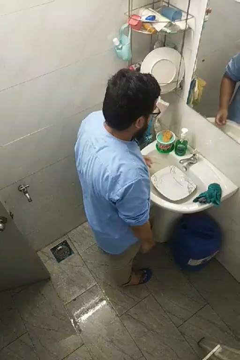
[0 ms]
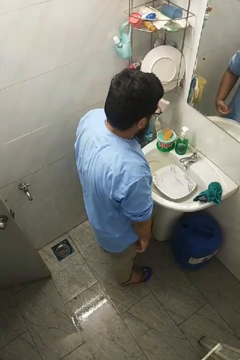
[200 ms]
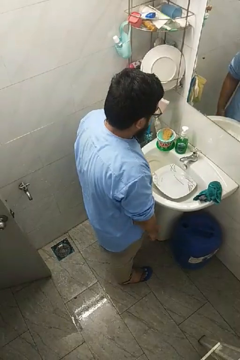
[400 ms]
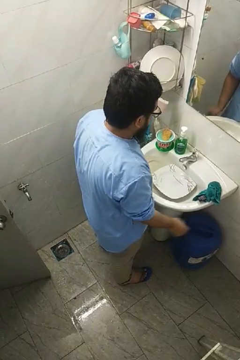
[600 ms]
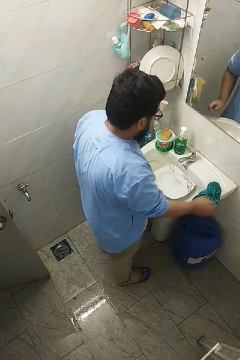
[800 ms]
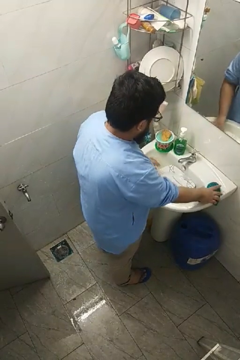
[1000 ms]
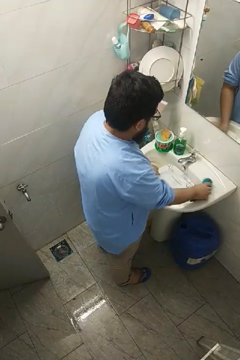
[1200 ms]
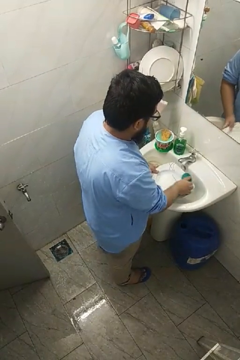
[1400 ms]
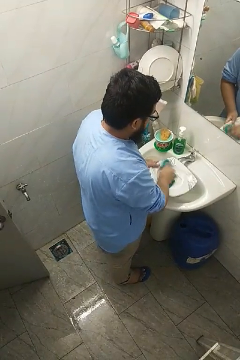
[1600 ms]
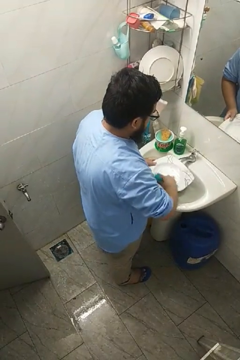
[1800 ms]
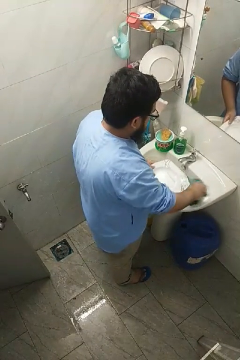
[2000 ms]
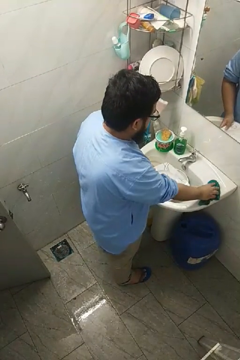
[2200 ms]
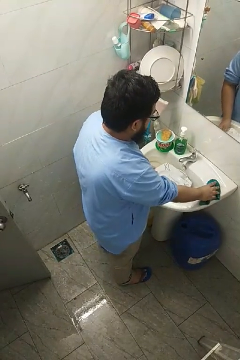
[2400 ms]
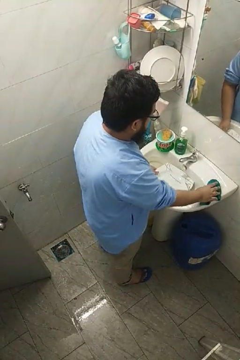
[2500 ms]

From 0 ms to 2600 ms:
person dries dish

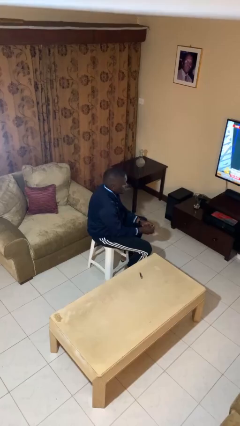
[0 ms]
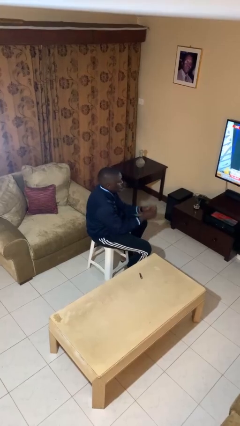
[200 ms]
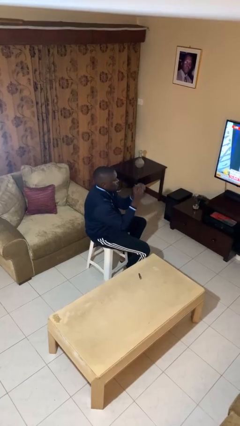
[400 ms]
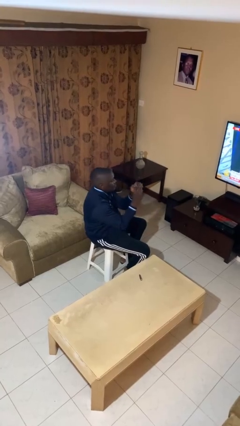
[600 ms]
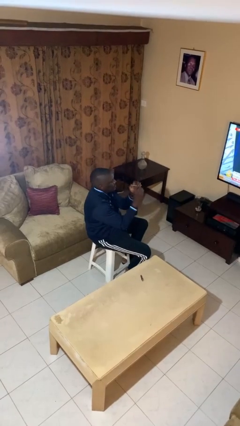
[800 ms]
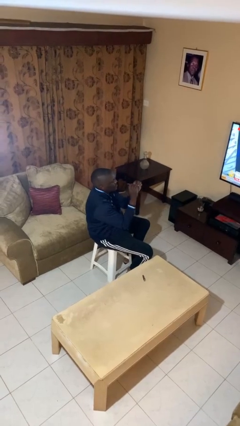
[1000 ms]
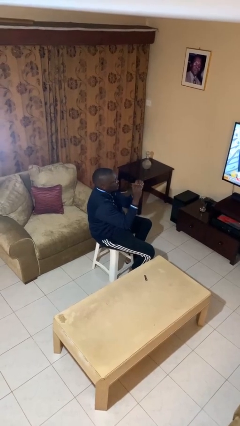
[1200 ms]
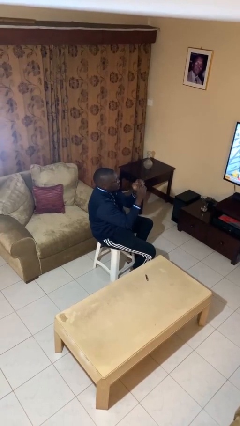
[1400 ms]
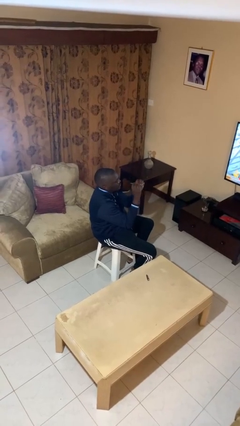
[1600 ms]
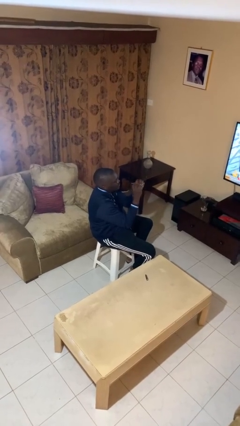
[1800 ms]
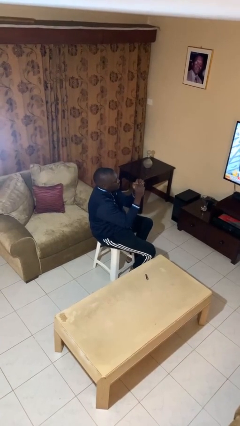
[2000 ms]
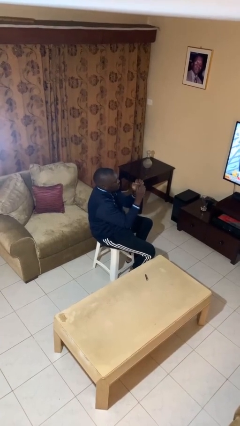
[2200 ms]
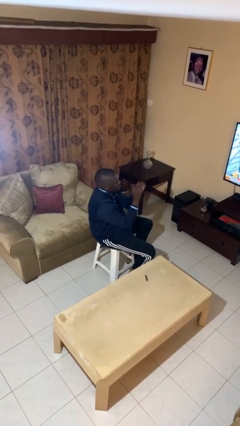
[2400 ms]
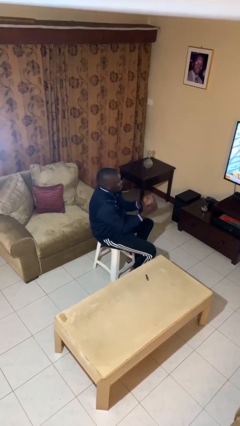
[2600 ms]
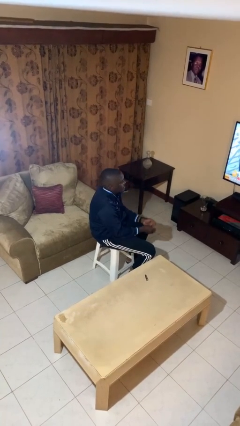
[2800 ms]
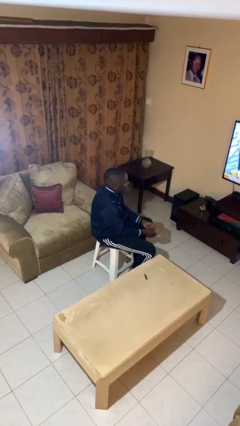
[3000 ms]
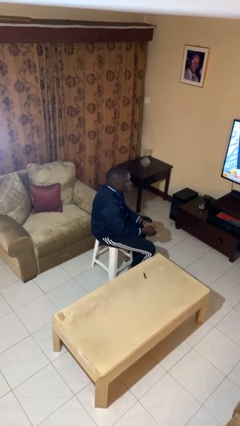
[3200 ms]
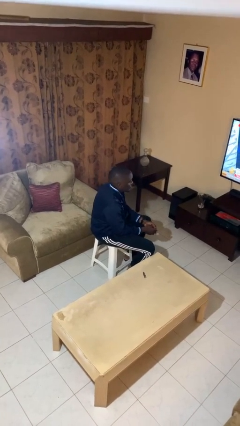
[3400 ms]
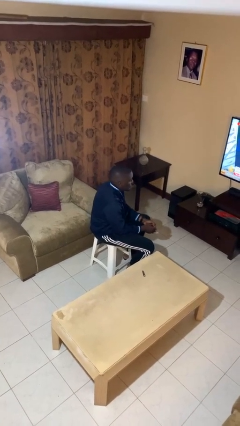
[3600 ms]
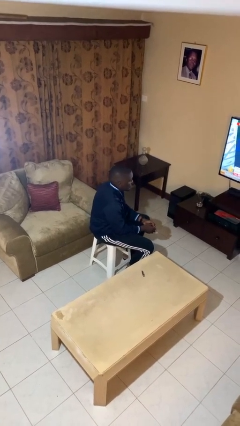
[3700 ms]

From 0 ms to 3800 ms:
person files fingernails

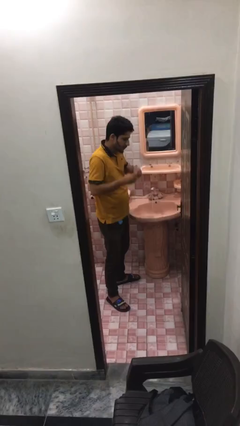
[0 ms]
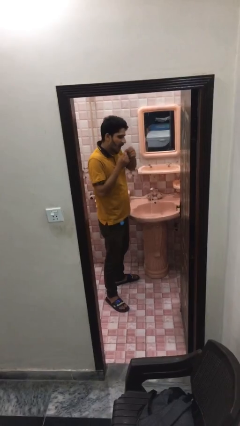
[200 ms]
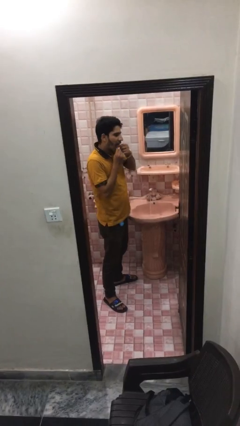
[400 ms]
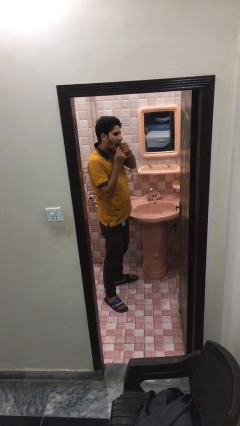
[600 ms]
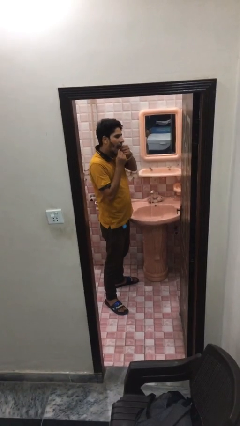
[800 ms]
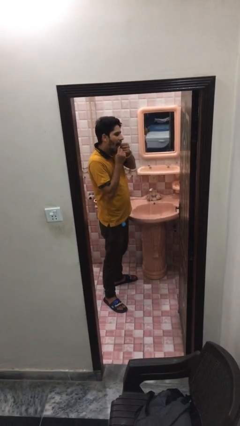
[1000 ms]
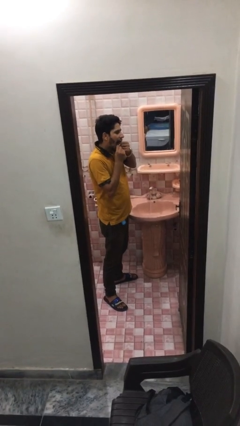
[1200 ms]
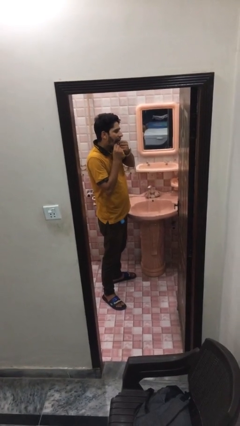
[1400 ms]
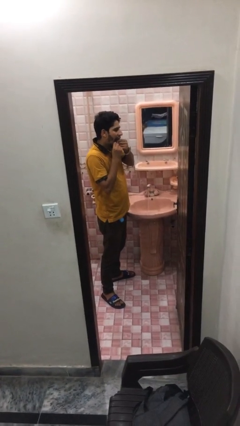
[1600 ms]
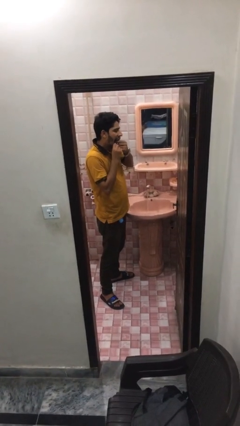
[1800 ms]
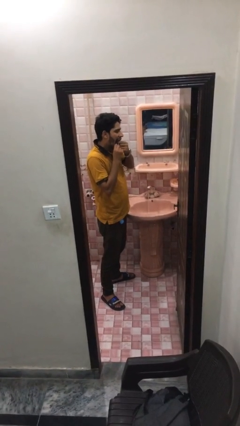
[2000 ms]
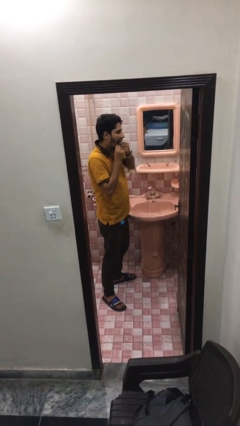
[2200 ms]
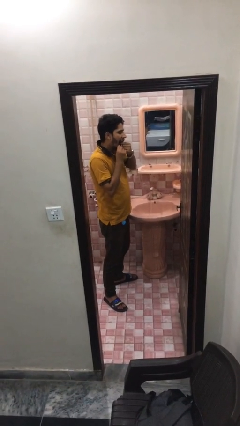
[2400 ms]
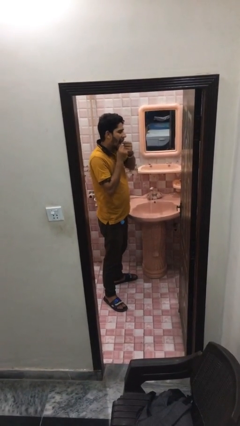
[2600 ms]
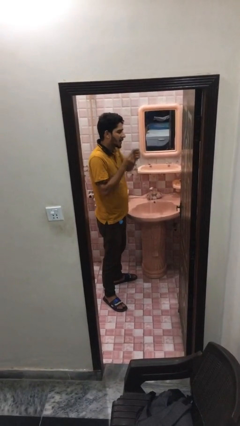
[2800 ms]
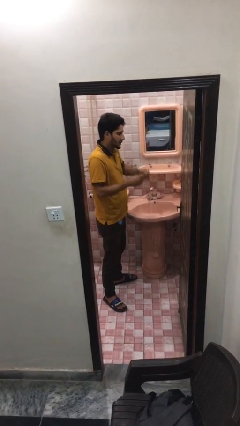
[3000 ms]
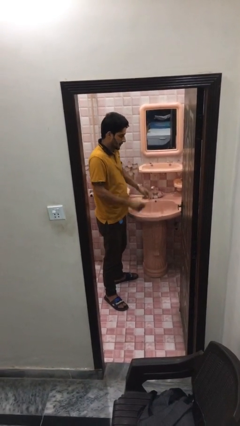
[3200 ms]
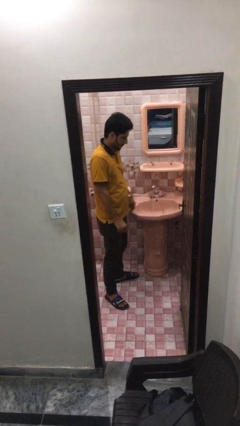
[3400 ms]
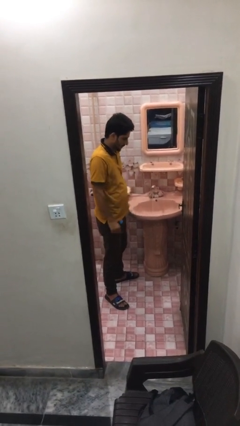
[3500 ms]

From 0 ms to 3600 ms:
person flosses

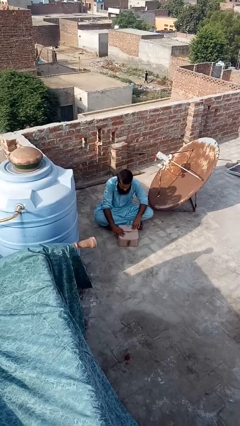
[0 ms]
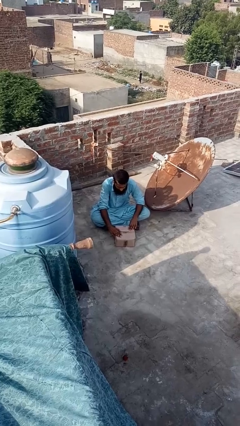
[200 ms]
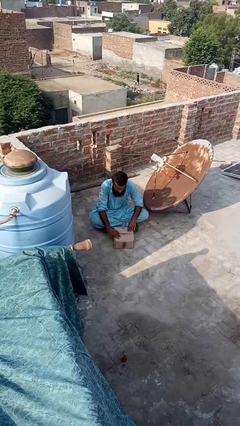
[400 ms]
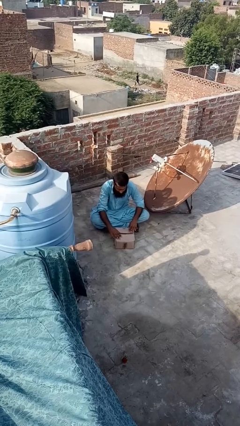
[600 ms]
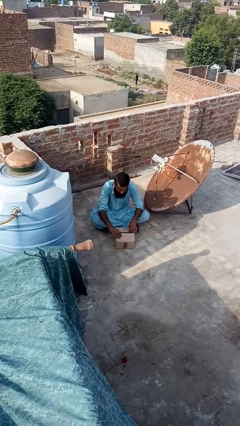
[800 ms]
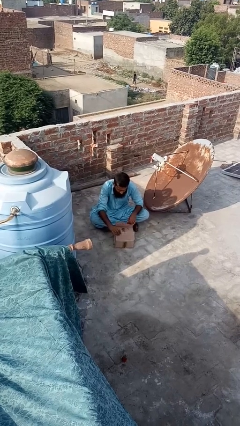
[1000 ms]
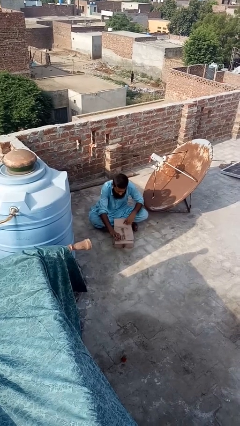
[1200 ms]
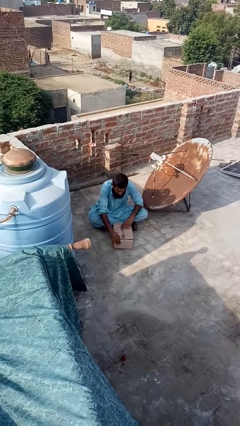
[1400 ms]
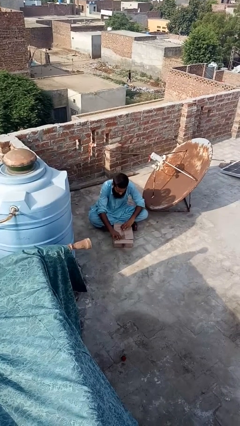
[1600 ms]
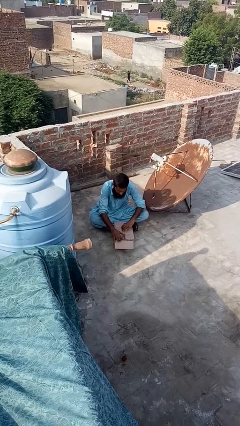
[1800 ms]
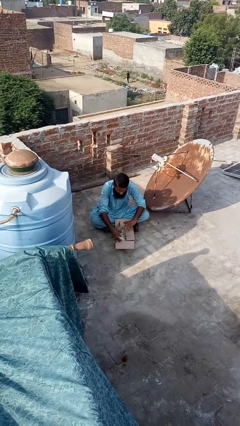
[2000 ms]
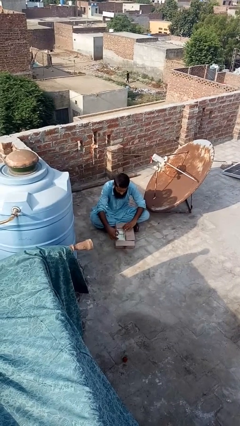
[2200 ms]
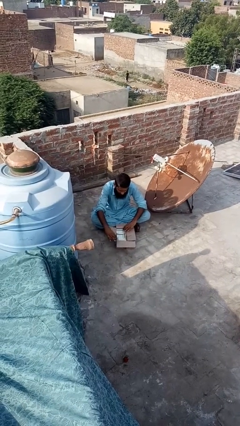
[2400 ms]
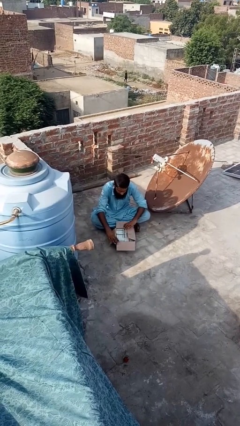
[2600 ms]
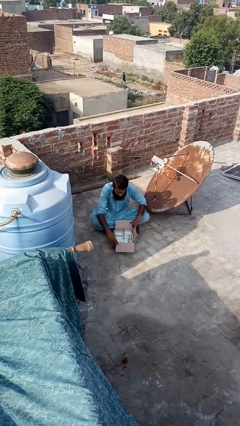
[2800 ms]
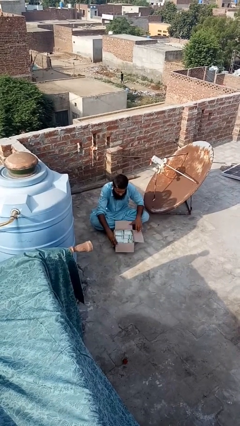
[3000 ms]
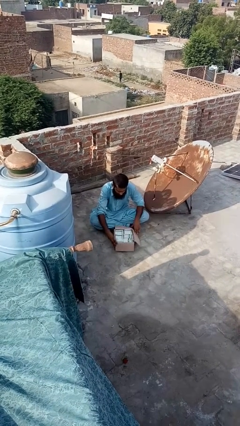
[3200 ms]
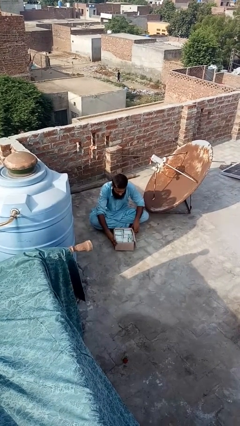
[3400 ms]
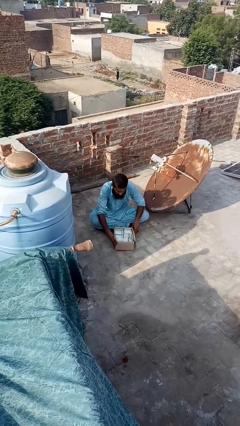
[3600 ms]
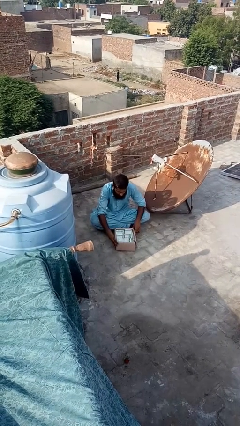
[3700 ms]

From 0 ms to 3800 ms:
person opens box

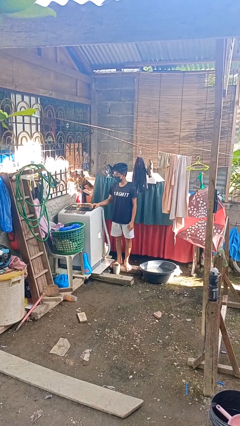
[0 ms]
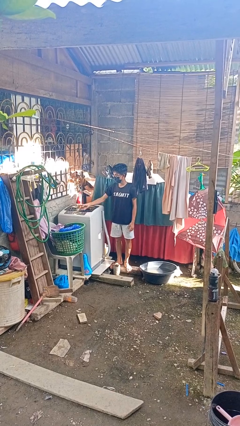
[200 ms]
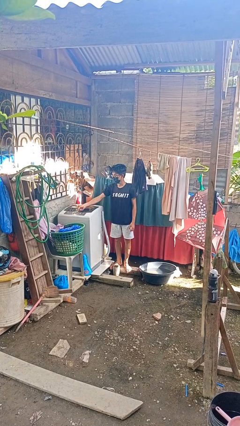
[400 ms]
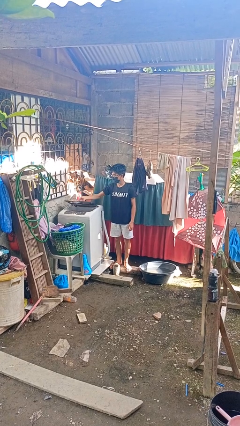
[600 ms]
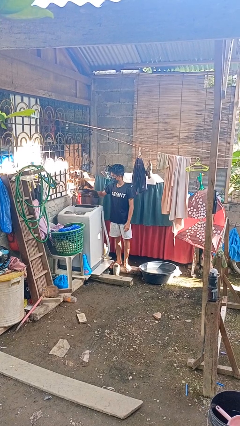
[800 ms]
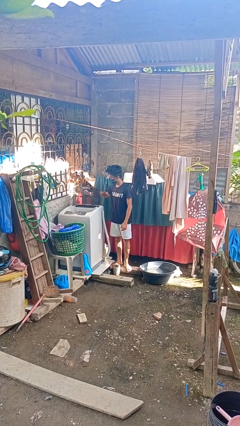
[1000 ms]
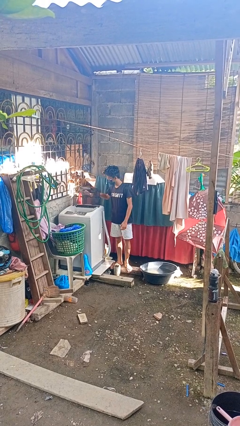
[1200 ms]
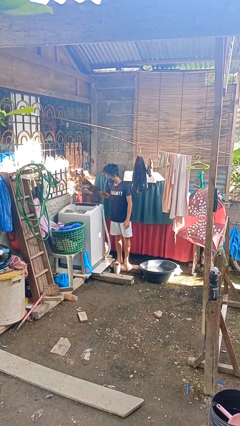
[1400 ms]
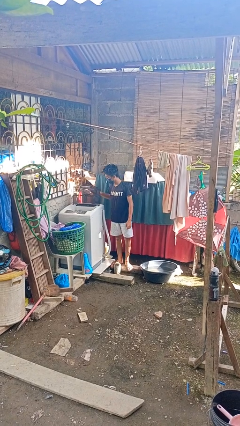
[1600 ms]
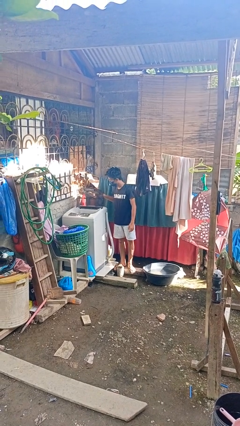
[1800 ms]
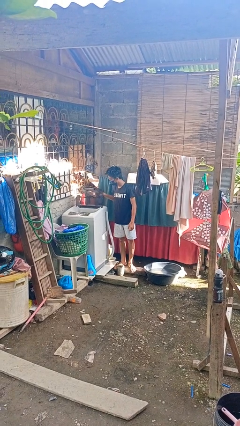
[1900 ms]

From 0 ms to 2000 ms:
person opens clothes washer

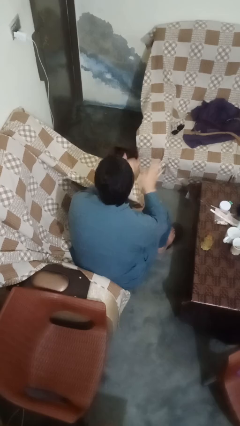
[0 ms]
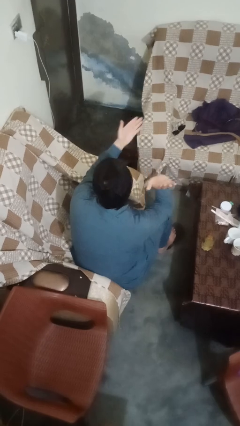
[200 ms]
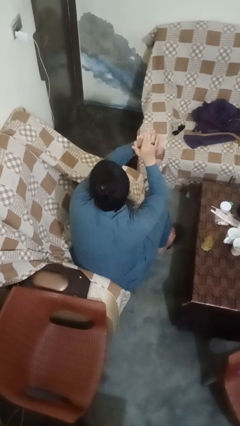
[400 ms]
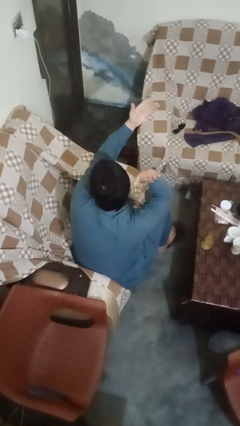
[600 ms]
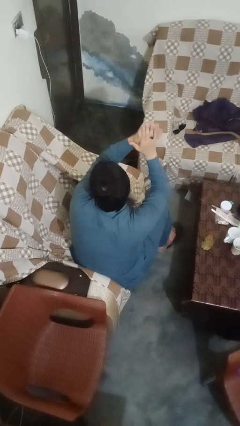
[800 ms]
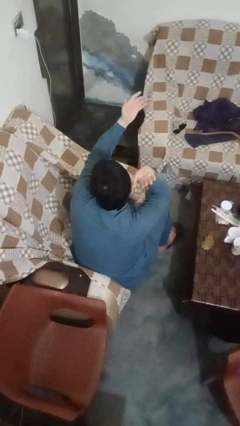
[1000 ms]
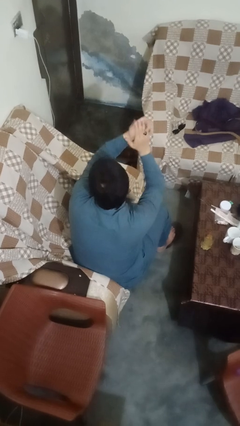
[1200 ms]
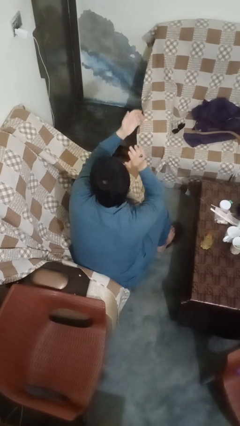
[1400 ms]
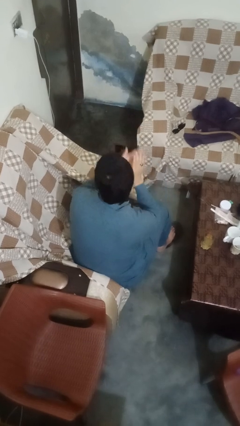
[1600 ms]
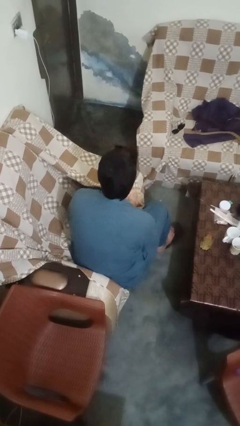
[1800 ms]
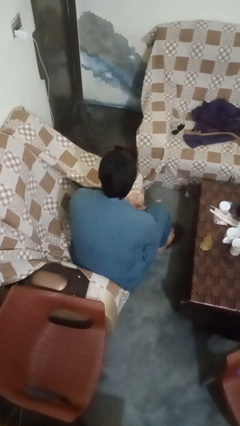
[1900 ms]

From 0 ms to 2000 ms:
person claps hands

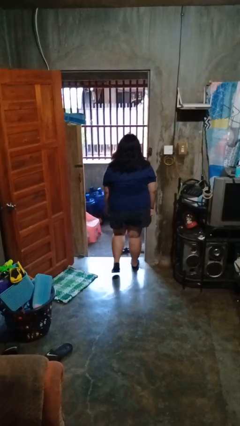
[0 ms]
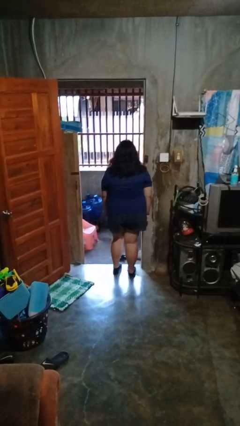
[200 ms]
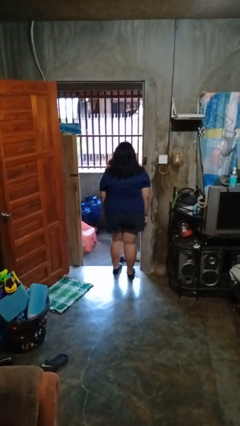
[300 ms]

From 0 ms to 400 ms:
person bumps into wall
